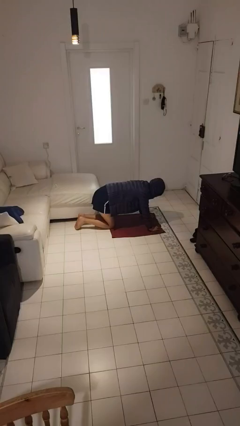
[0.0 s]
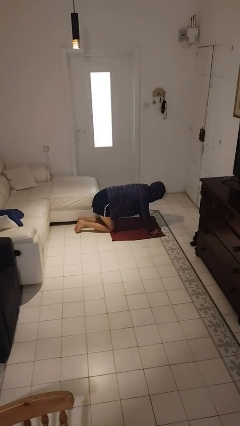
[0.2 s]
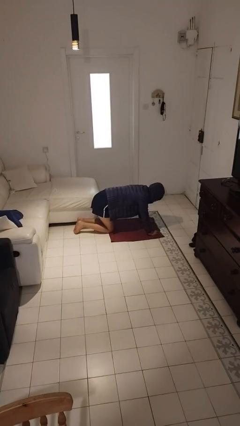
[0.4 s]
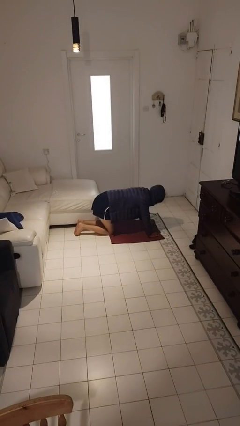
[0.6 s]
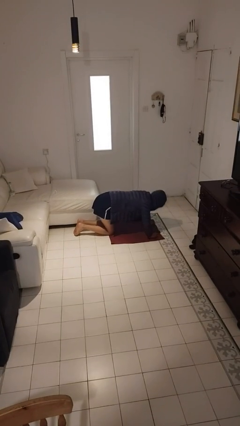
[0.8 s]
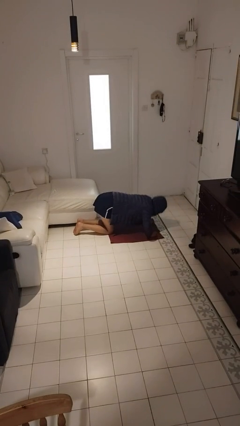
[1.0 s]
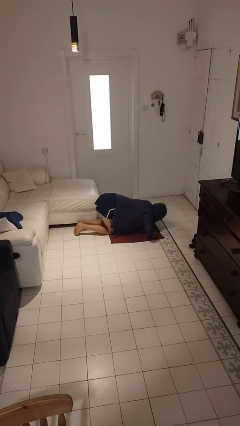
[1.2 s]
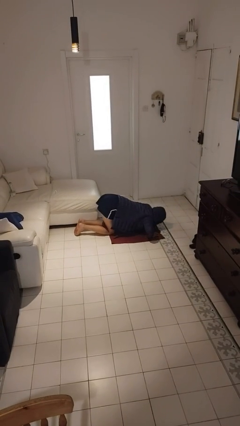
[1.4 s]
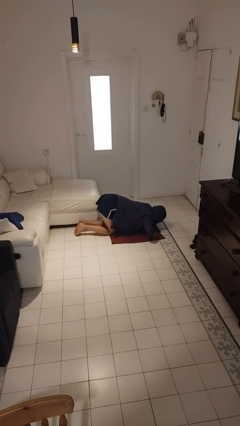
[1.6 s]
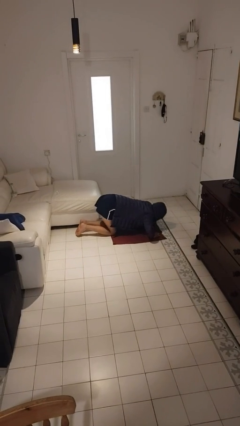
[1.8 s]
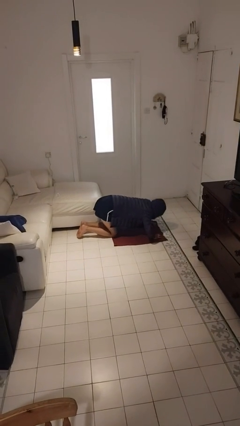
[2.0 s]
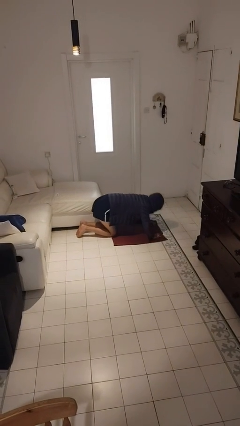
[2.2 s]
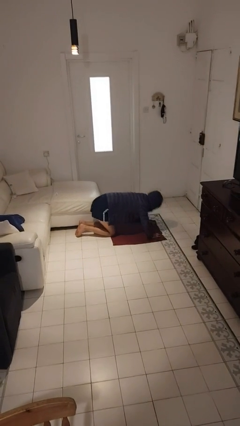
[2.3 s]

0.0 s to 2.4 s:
person exercises with pushup

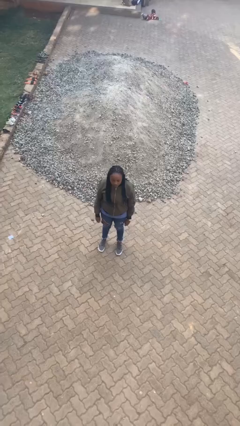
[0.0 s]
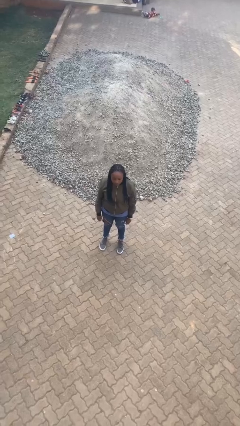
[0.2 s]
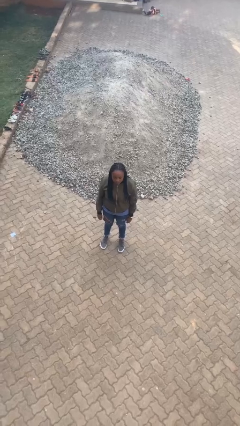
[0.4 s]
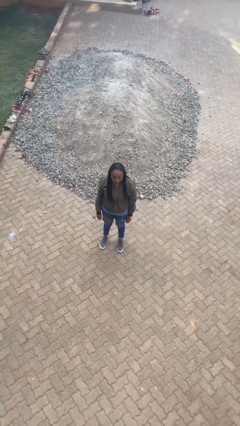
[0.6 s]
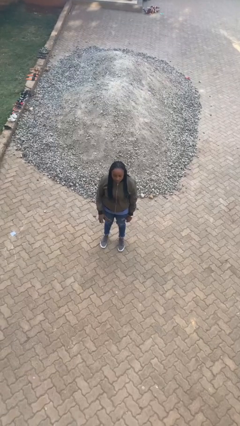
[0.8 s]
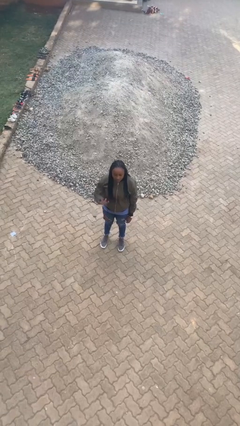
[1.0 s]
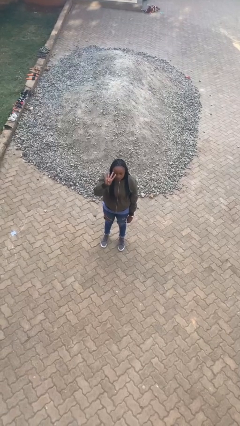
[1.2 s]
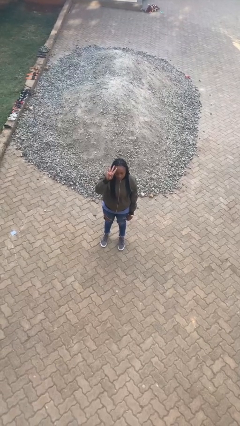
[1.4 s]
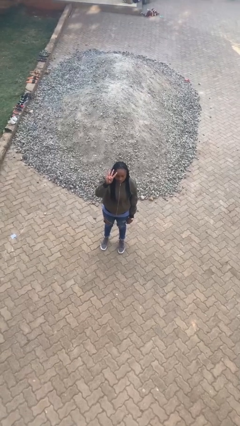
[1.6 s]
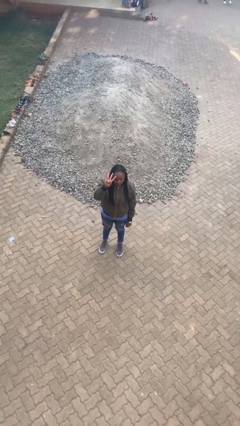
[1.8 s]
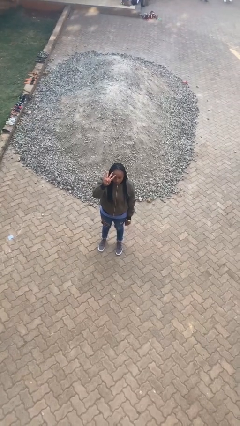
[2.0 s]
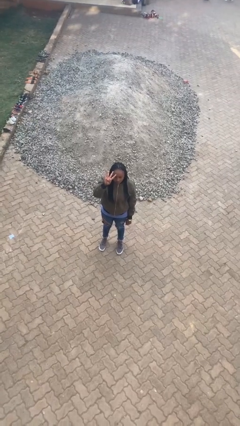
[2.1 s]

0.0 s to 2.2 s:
person gestures number four

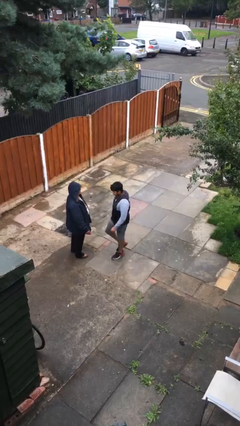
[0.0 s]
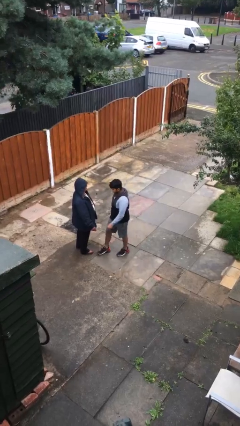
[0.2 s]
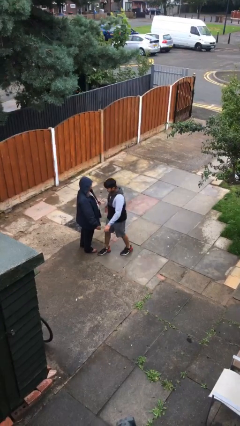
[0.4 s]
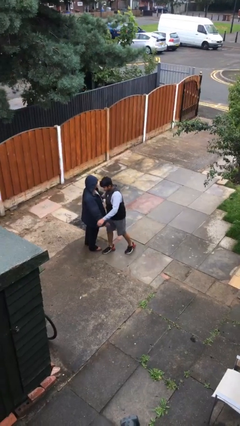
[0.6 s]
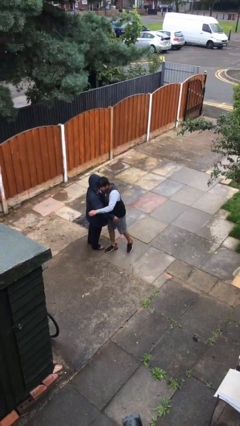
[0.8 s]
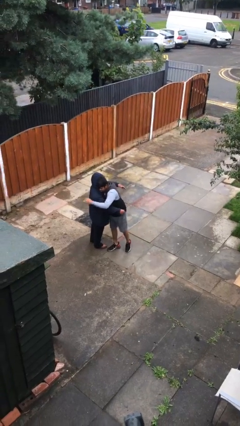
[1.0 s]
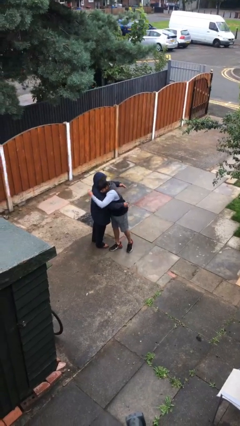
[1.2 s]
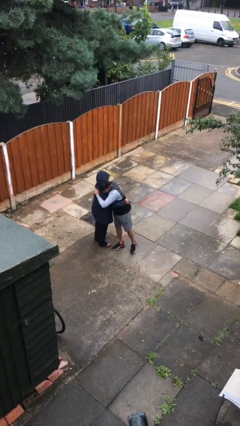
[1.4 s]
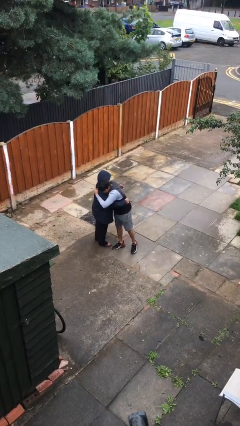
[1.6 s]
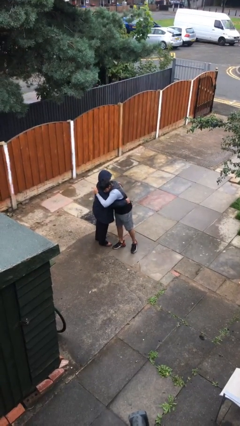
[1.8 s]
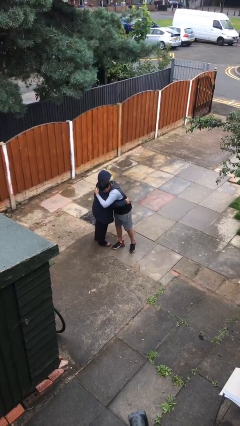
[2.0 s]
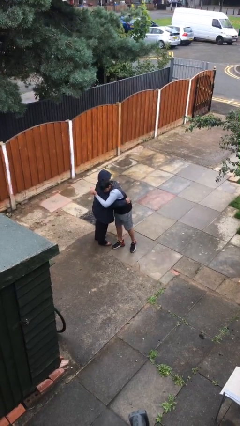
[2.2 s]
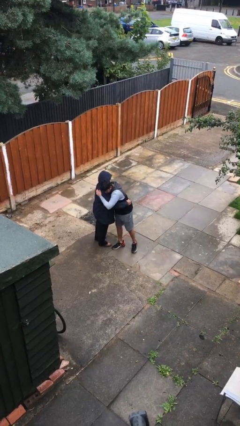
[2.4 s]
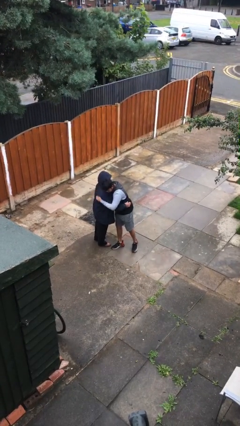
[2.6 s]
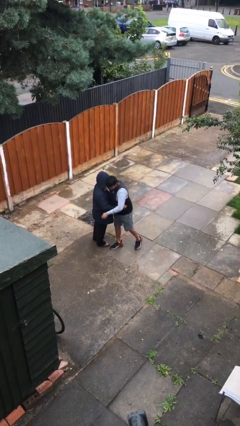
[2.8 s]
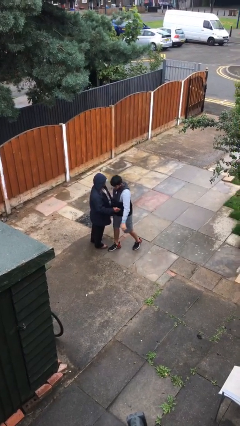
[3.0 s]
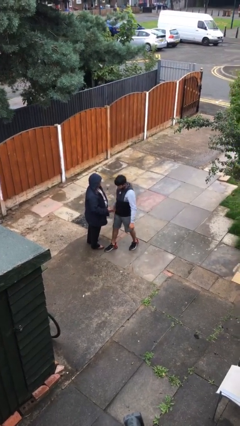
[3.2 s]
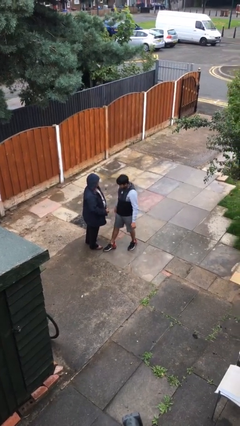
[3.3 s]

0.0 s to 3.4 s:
person embraces person

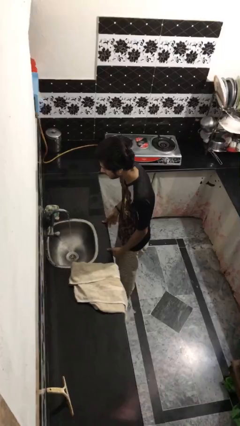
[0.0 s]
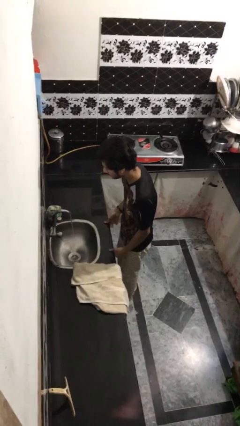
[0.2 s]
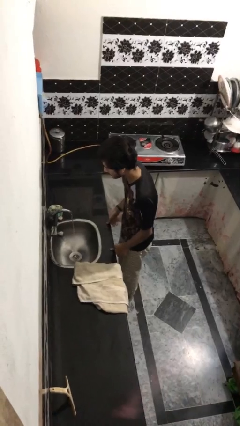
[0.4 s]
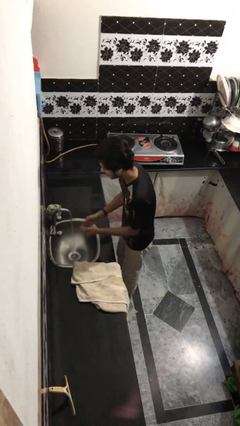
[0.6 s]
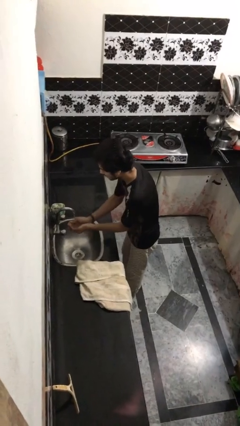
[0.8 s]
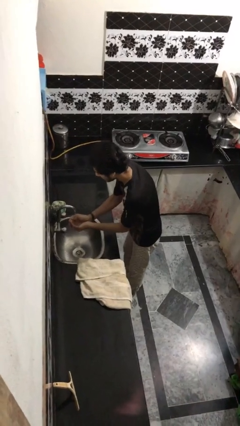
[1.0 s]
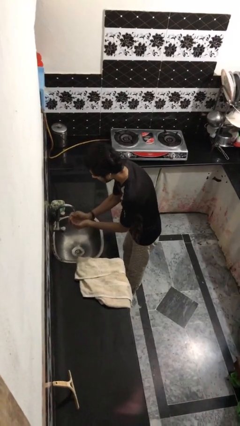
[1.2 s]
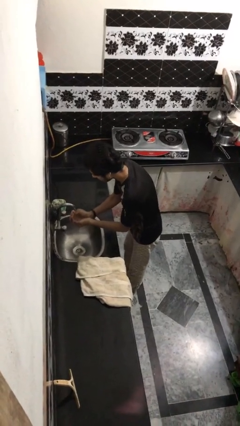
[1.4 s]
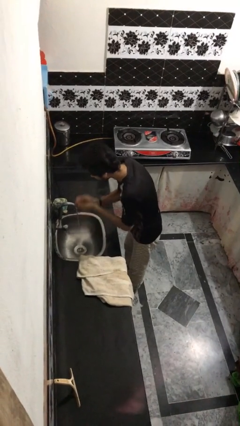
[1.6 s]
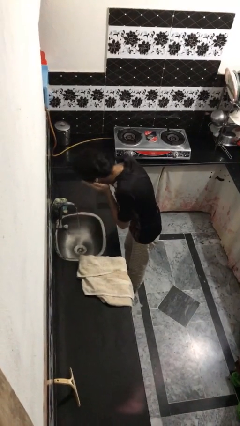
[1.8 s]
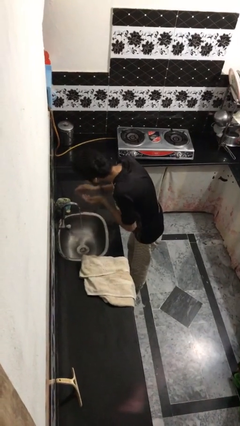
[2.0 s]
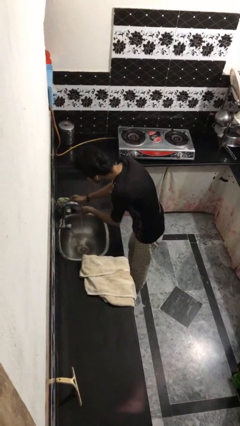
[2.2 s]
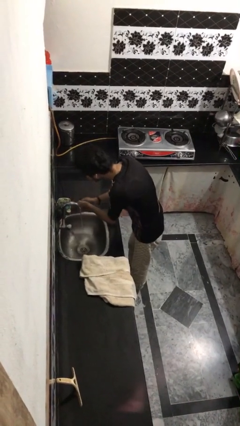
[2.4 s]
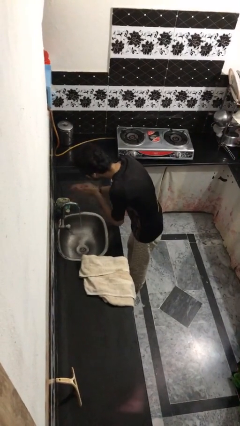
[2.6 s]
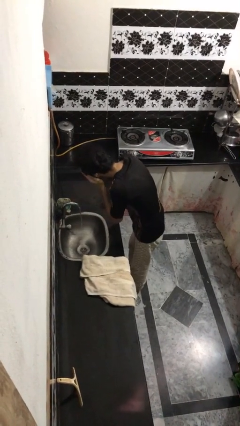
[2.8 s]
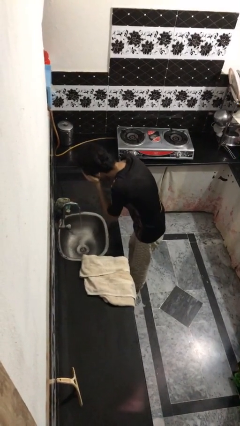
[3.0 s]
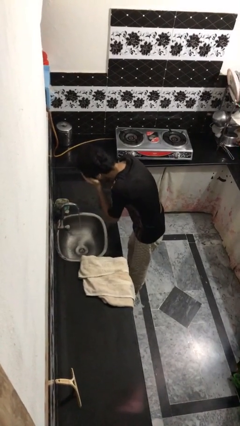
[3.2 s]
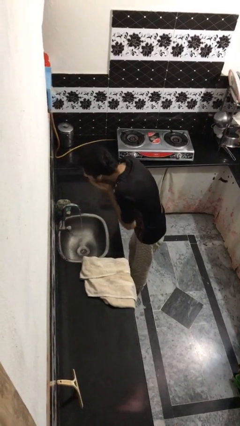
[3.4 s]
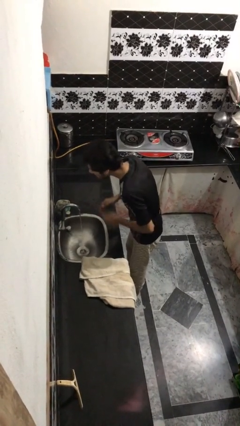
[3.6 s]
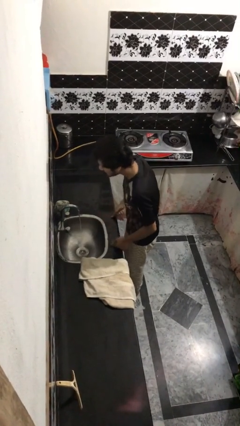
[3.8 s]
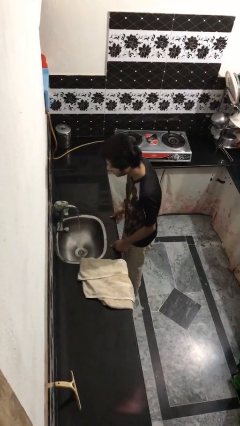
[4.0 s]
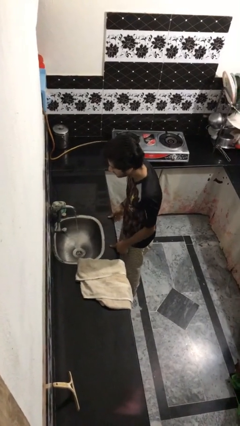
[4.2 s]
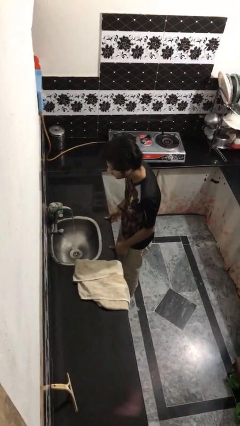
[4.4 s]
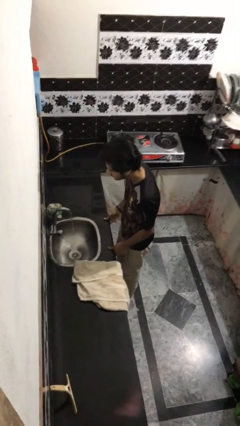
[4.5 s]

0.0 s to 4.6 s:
person washes face

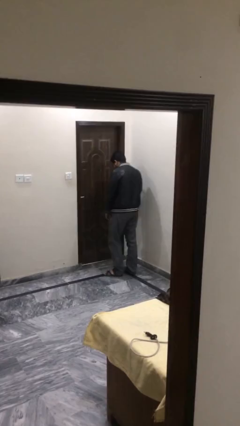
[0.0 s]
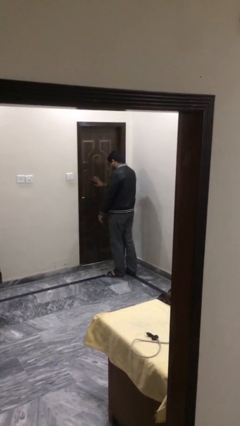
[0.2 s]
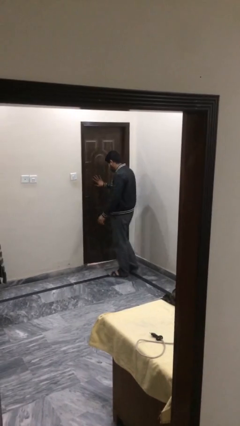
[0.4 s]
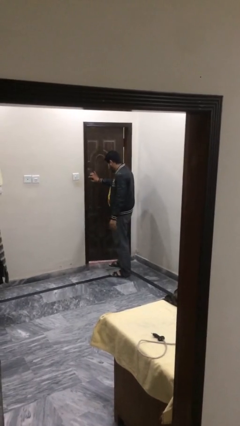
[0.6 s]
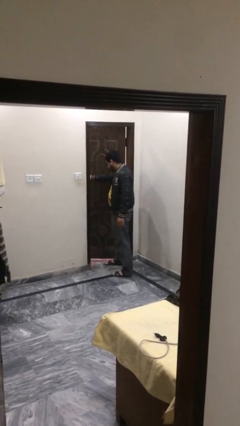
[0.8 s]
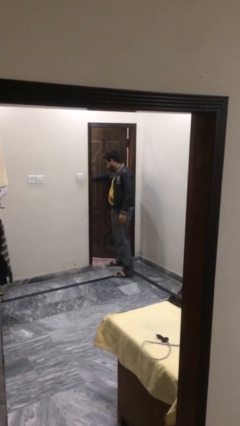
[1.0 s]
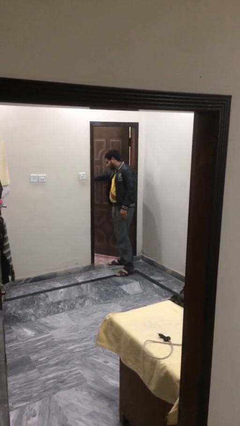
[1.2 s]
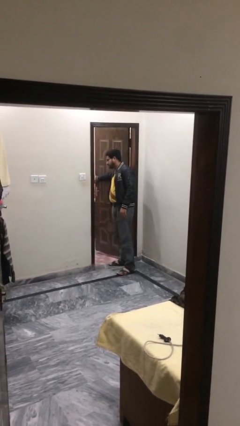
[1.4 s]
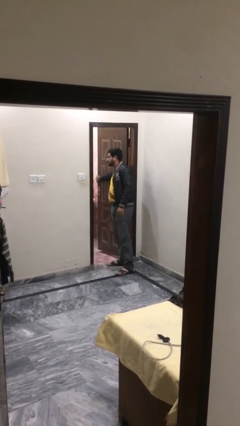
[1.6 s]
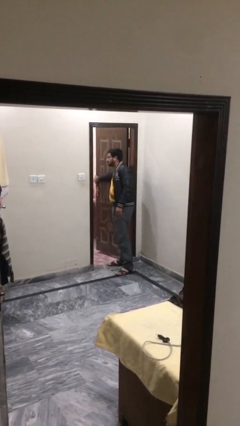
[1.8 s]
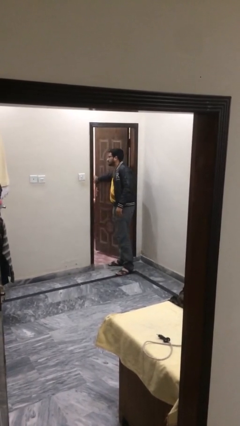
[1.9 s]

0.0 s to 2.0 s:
person opens facility door

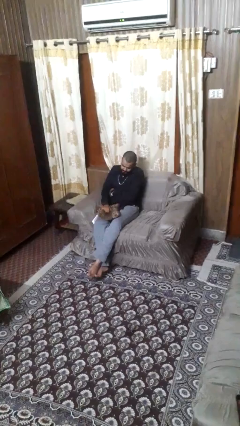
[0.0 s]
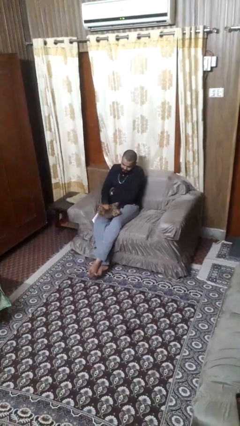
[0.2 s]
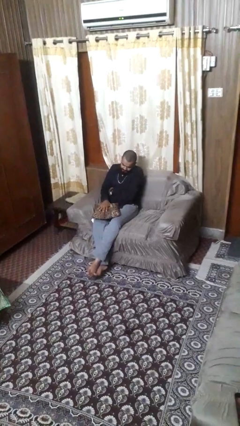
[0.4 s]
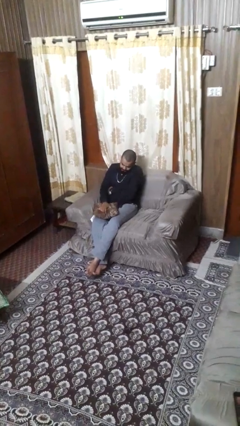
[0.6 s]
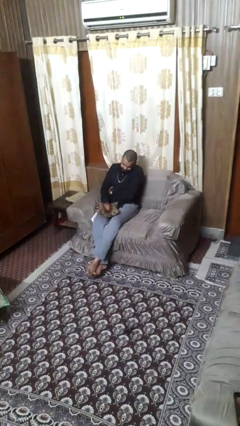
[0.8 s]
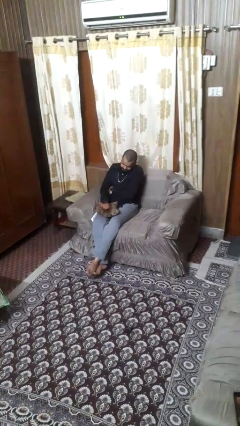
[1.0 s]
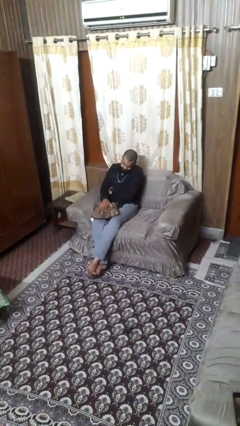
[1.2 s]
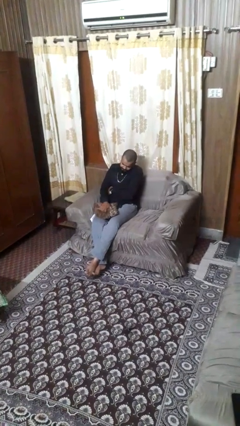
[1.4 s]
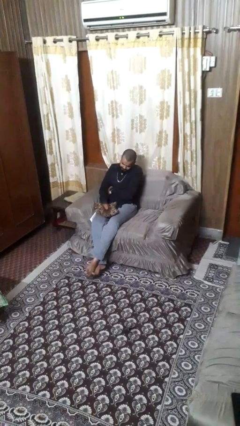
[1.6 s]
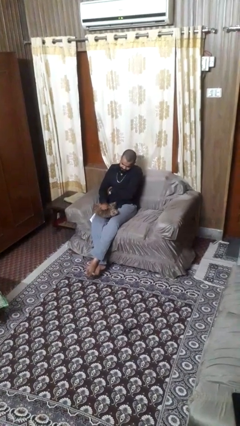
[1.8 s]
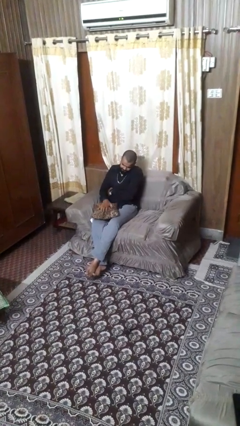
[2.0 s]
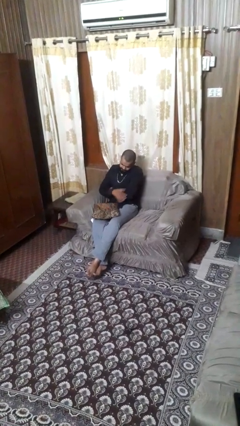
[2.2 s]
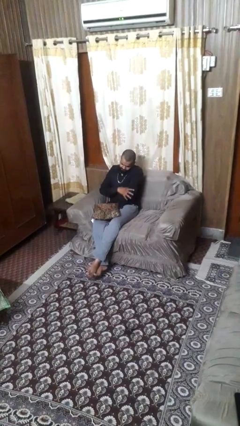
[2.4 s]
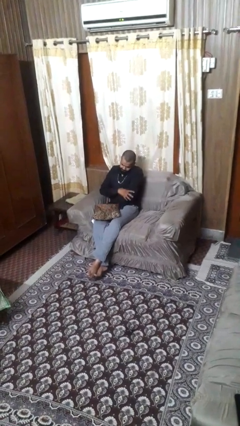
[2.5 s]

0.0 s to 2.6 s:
person squeezes object

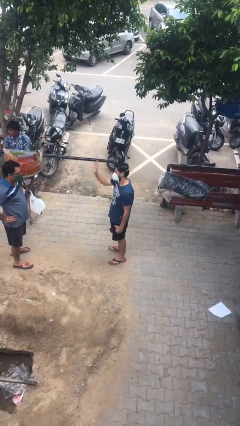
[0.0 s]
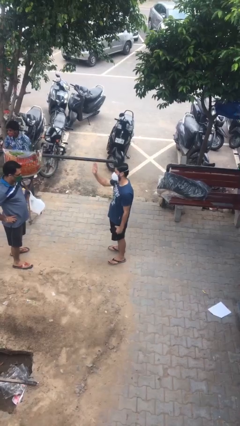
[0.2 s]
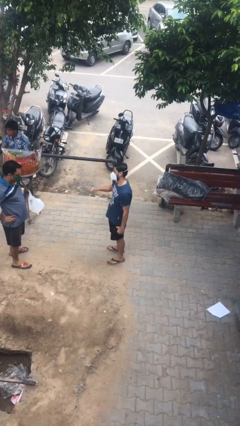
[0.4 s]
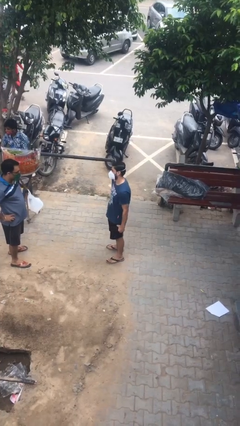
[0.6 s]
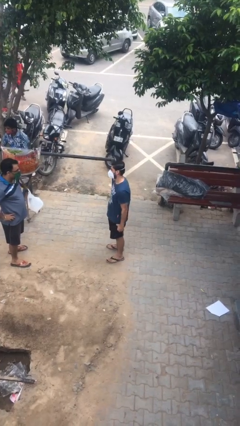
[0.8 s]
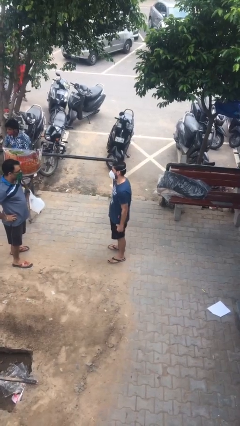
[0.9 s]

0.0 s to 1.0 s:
person waves at person
